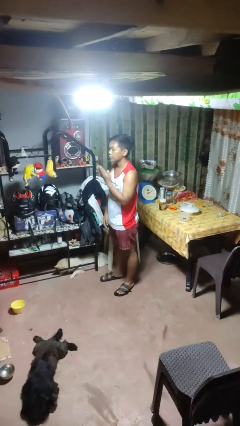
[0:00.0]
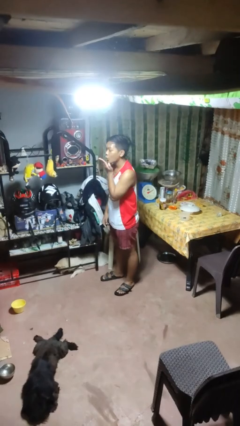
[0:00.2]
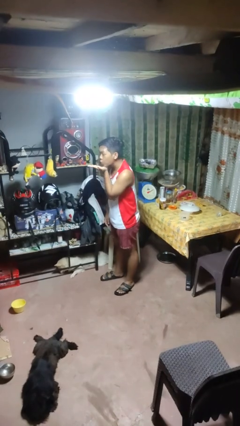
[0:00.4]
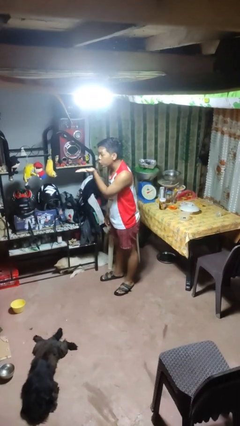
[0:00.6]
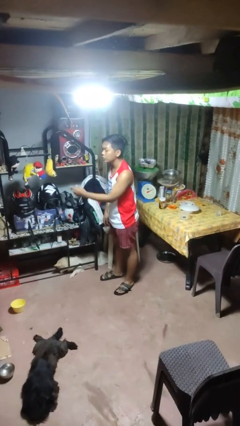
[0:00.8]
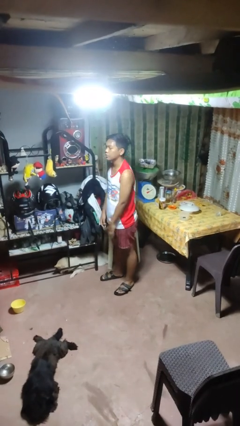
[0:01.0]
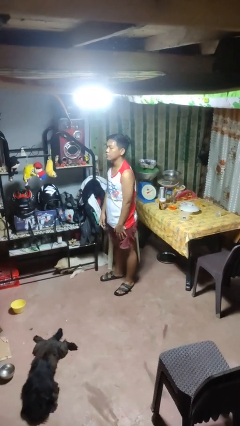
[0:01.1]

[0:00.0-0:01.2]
person gestures blow kiss

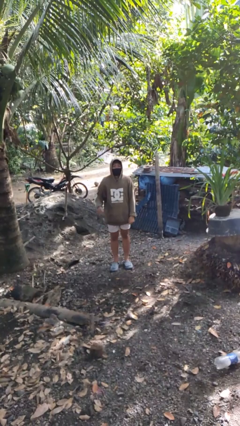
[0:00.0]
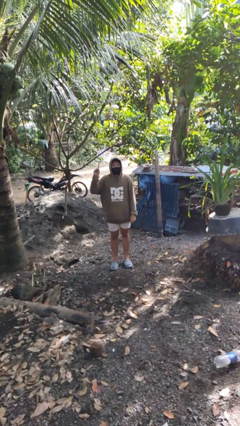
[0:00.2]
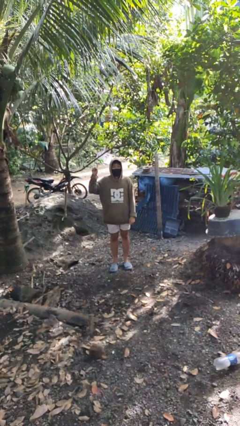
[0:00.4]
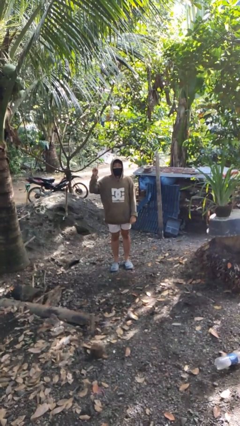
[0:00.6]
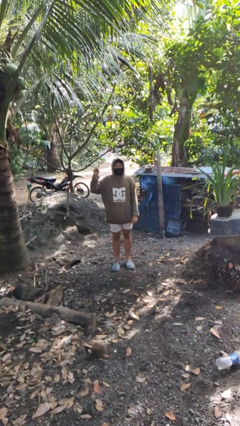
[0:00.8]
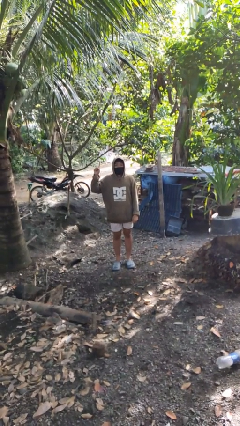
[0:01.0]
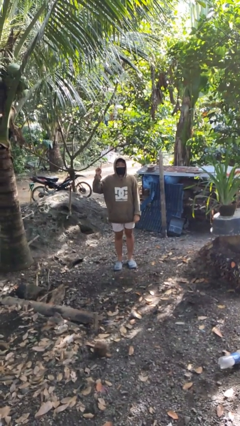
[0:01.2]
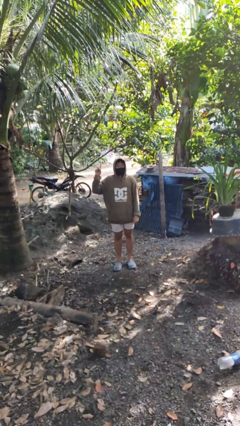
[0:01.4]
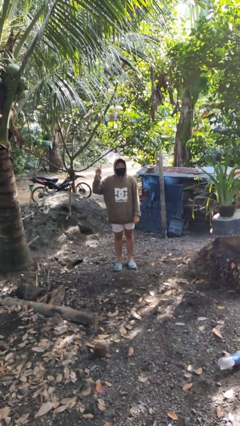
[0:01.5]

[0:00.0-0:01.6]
person gestures number one

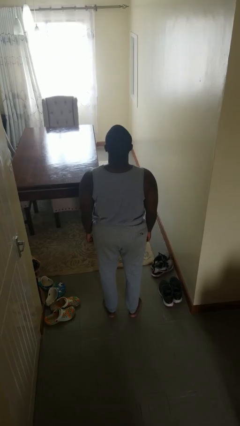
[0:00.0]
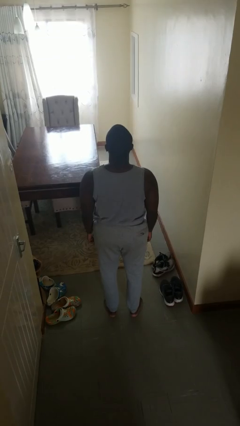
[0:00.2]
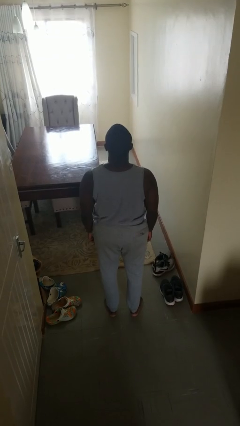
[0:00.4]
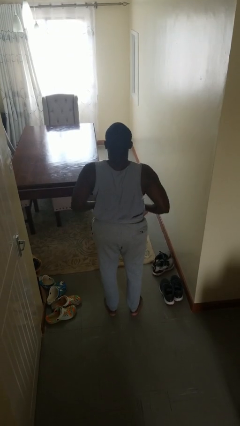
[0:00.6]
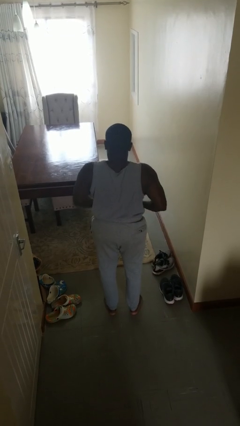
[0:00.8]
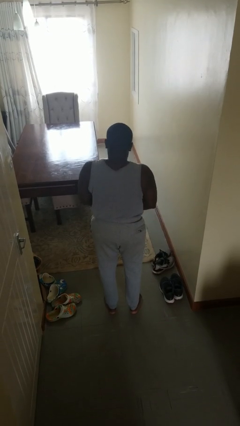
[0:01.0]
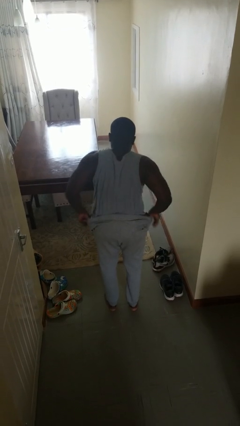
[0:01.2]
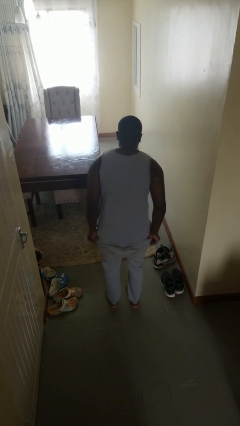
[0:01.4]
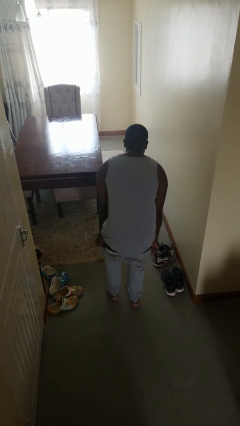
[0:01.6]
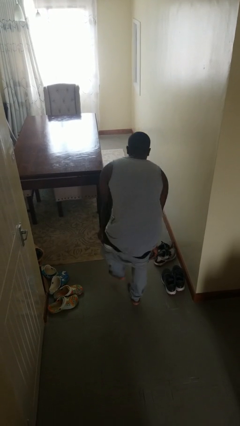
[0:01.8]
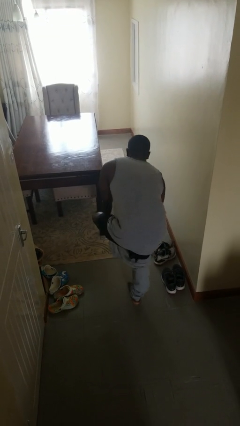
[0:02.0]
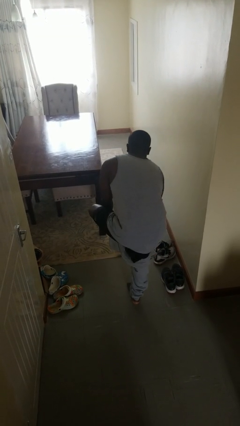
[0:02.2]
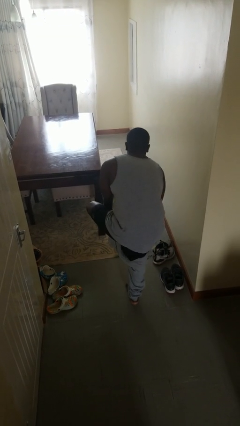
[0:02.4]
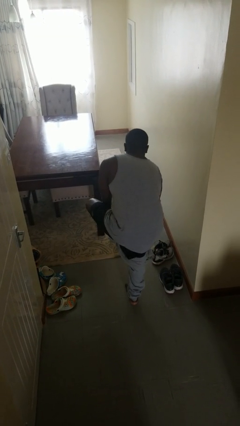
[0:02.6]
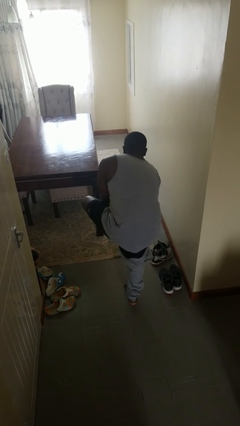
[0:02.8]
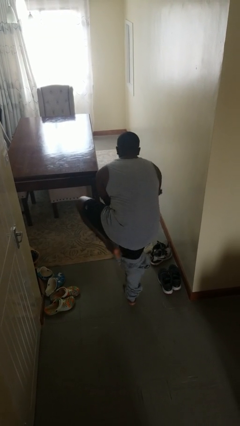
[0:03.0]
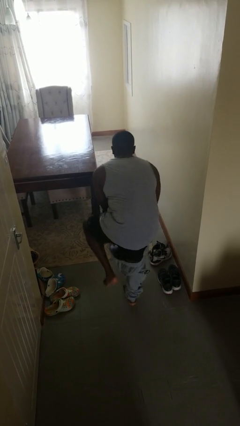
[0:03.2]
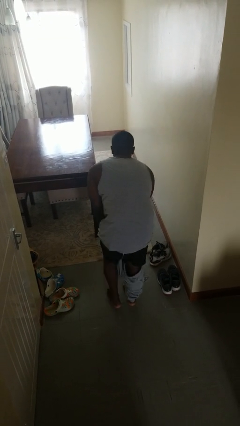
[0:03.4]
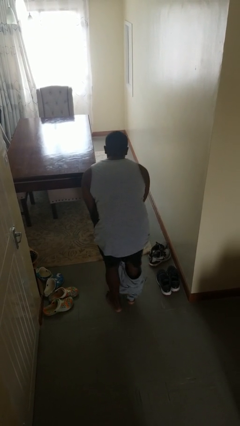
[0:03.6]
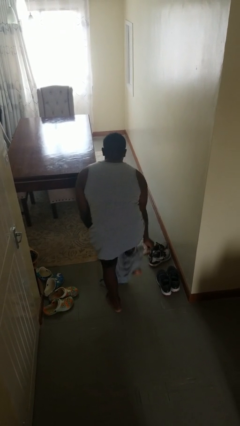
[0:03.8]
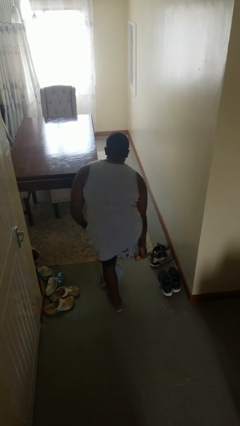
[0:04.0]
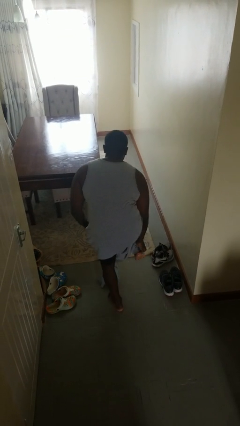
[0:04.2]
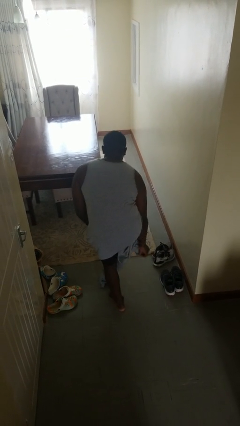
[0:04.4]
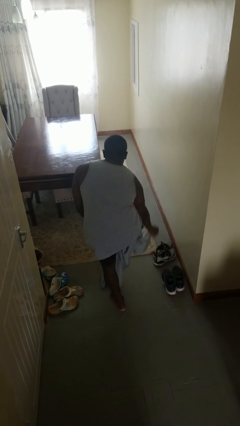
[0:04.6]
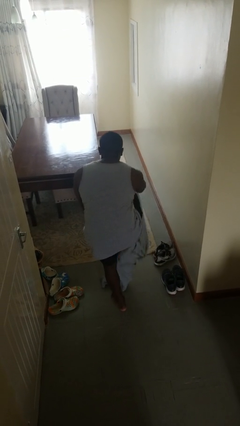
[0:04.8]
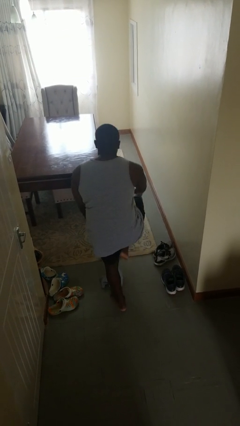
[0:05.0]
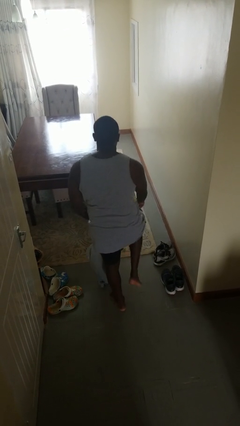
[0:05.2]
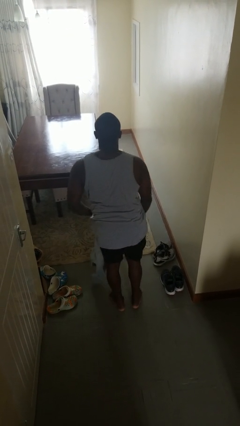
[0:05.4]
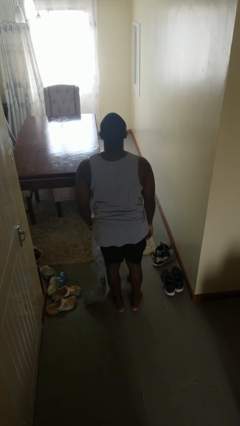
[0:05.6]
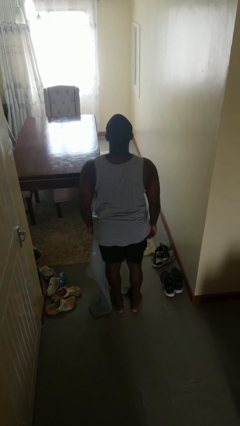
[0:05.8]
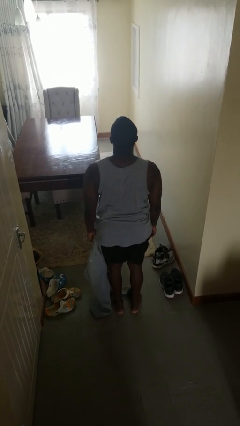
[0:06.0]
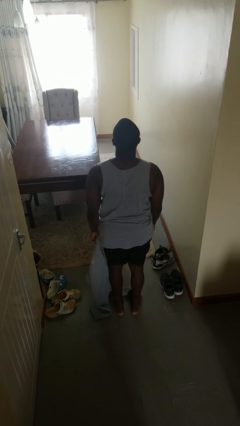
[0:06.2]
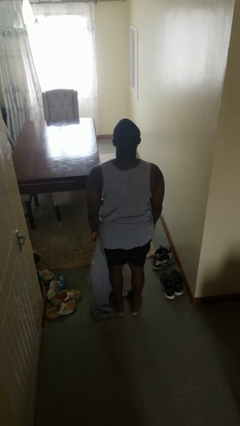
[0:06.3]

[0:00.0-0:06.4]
person takes off pants

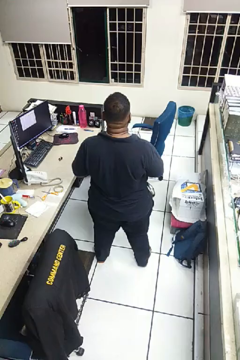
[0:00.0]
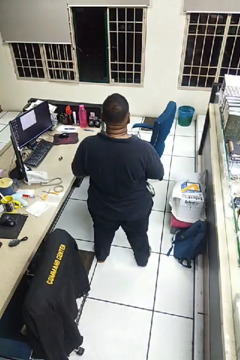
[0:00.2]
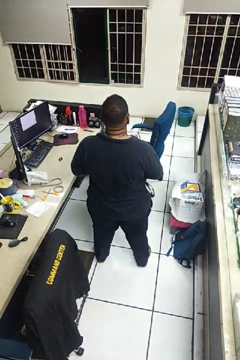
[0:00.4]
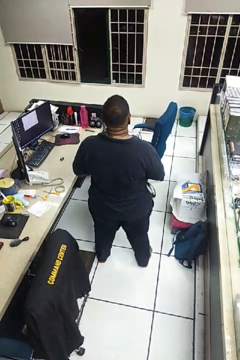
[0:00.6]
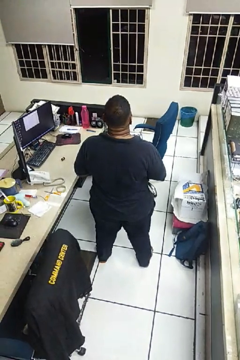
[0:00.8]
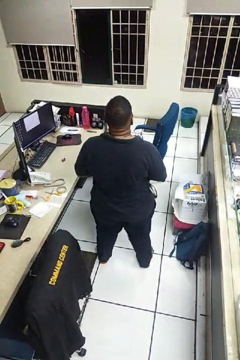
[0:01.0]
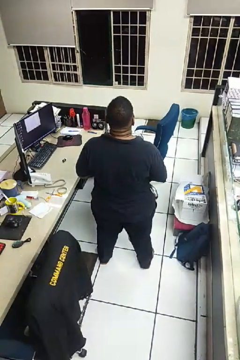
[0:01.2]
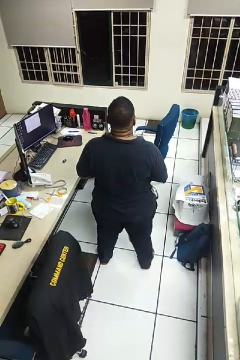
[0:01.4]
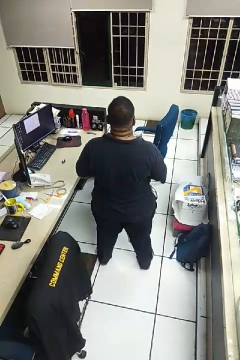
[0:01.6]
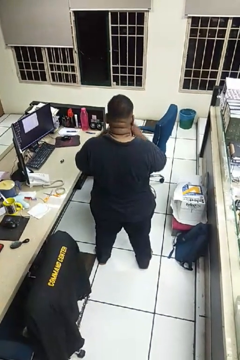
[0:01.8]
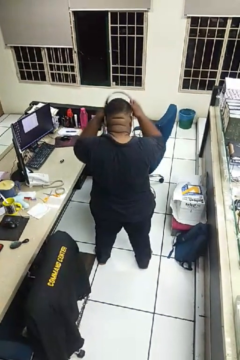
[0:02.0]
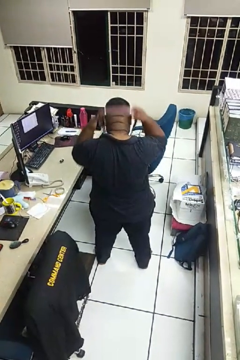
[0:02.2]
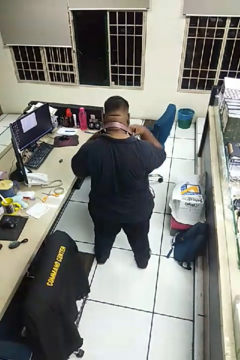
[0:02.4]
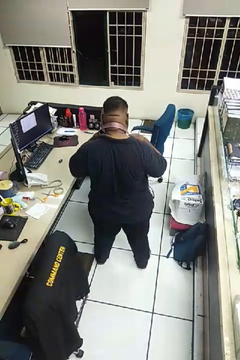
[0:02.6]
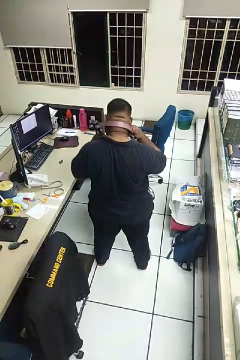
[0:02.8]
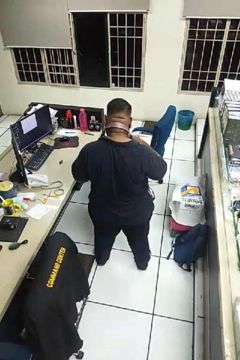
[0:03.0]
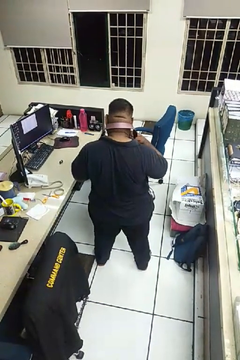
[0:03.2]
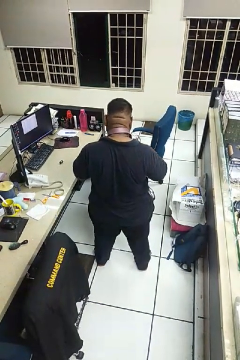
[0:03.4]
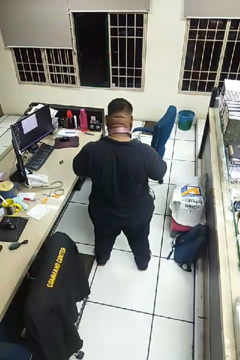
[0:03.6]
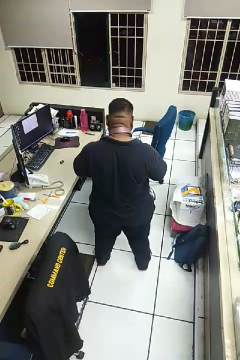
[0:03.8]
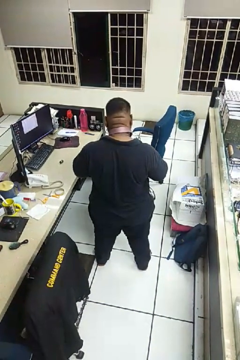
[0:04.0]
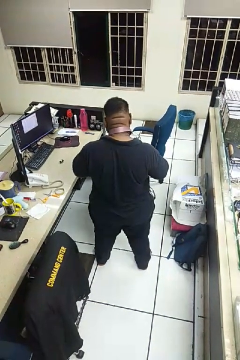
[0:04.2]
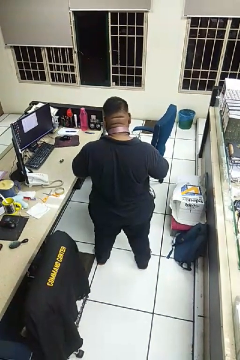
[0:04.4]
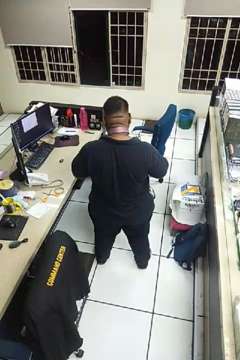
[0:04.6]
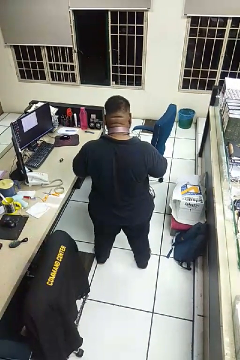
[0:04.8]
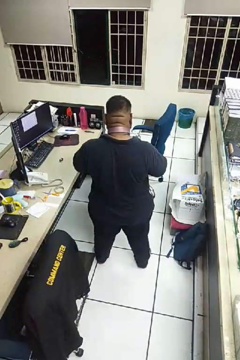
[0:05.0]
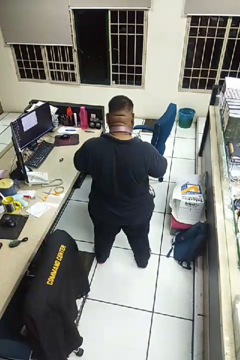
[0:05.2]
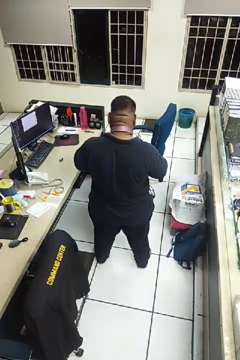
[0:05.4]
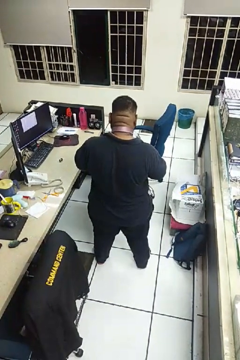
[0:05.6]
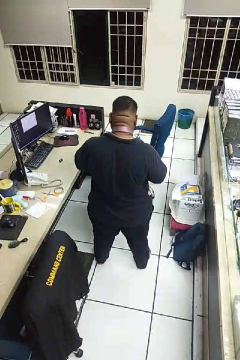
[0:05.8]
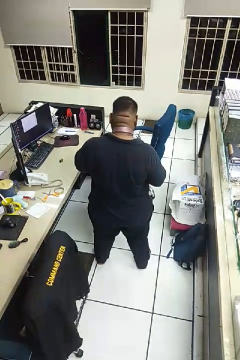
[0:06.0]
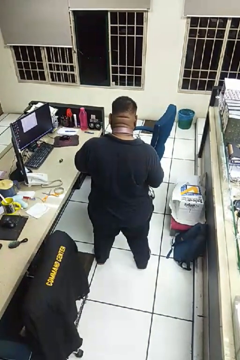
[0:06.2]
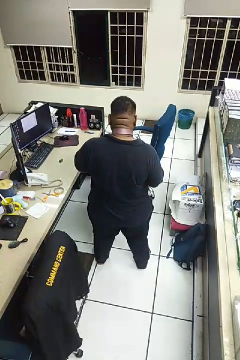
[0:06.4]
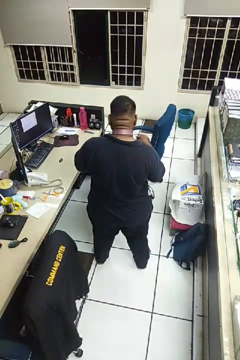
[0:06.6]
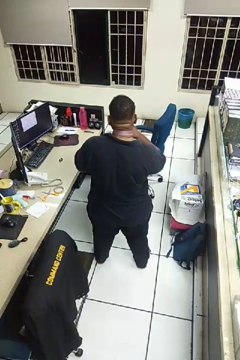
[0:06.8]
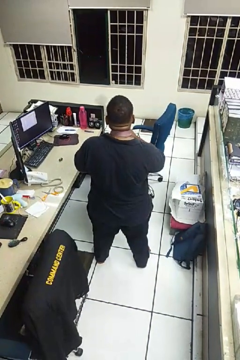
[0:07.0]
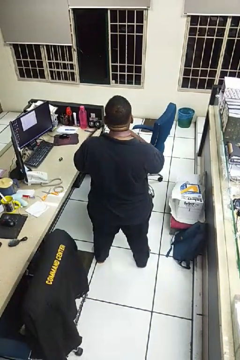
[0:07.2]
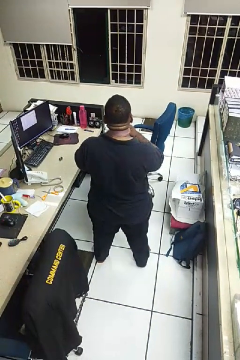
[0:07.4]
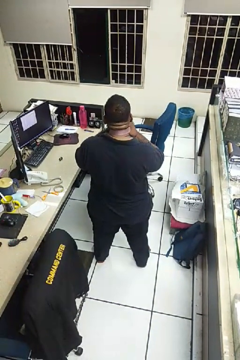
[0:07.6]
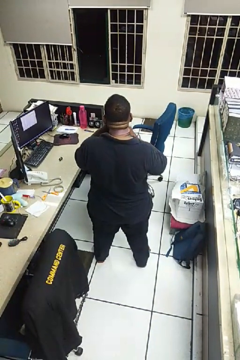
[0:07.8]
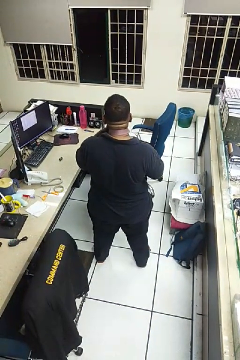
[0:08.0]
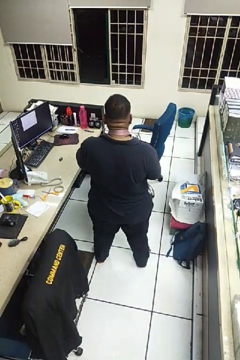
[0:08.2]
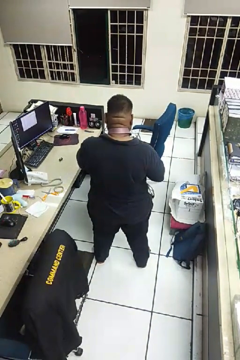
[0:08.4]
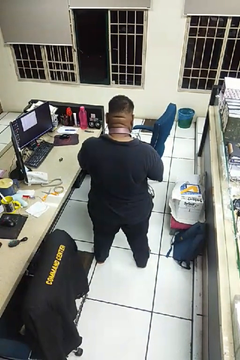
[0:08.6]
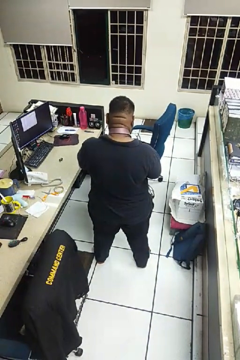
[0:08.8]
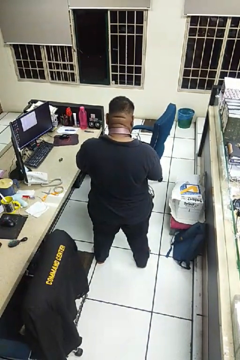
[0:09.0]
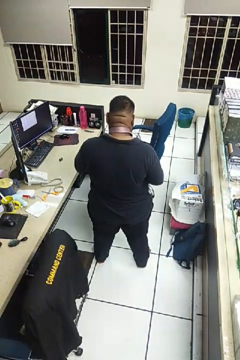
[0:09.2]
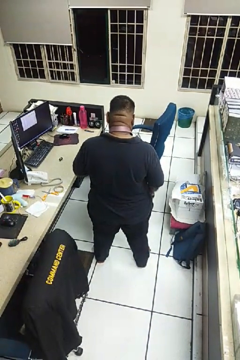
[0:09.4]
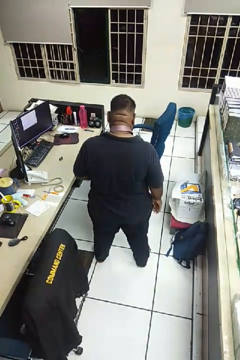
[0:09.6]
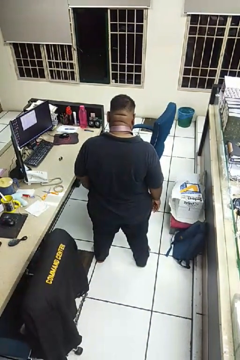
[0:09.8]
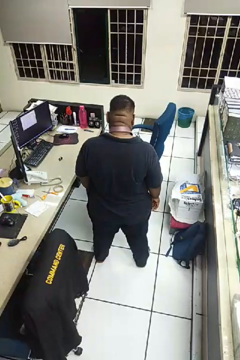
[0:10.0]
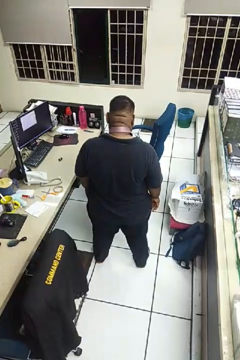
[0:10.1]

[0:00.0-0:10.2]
person puts on necktie

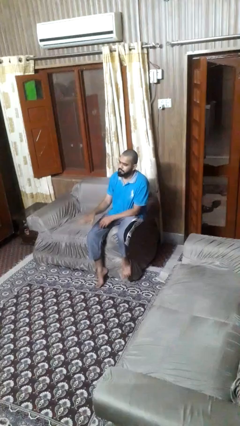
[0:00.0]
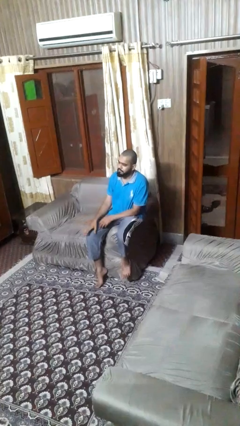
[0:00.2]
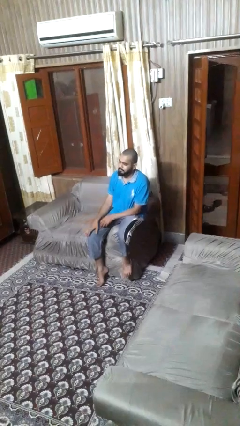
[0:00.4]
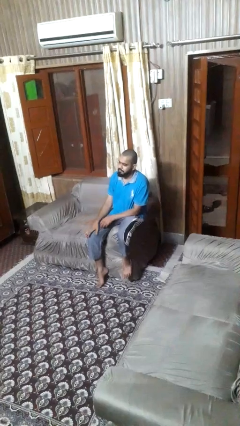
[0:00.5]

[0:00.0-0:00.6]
person gestures lower hand
